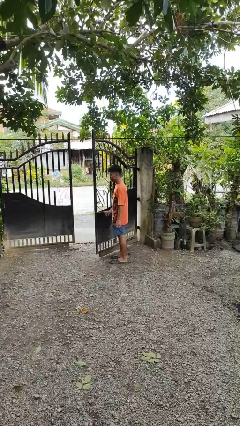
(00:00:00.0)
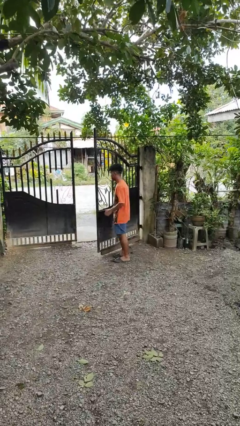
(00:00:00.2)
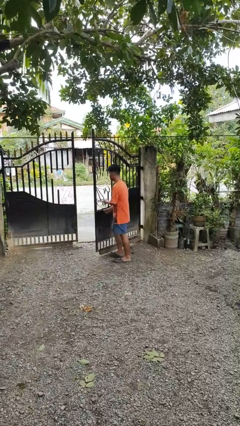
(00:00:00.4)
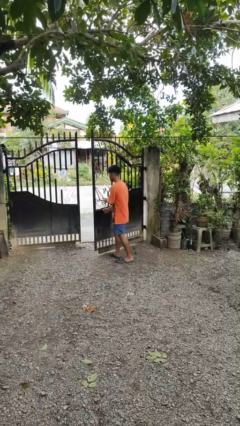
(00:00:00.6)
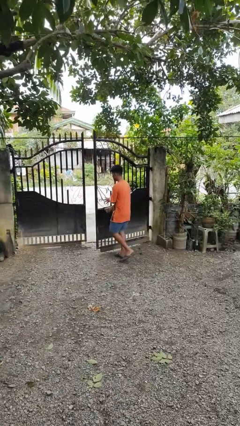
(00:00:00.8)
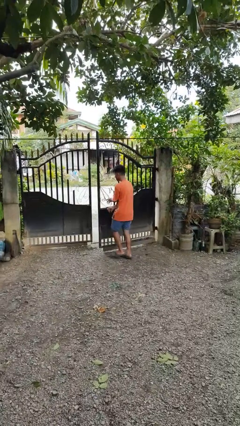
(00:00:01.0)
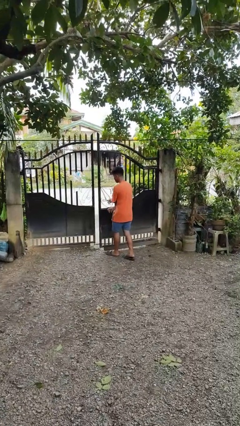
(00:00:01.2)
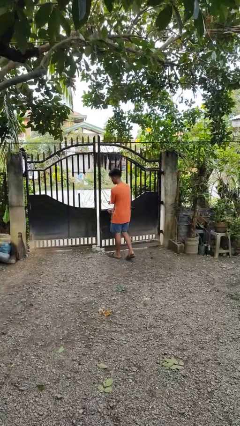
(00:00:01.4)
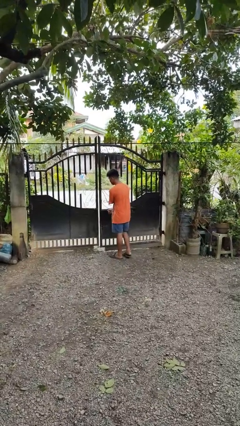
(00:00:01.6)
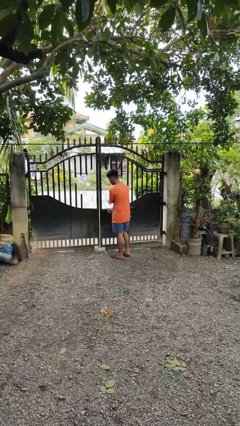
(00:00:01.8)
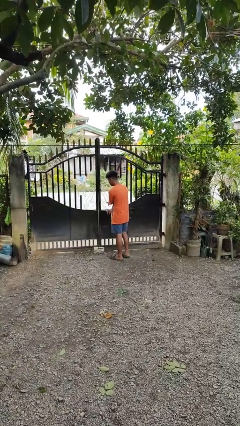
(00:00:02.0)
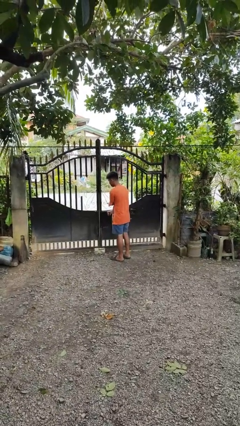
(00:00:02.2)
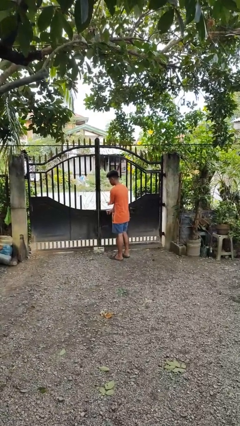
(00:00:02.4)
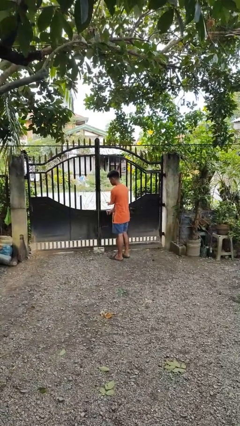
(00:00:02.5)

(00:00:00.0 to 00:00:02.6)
person closes gate

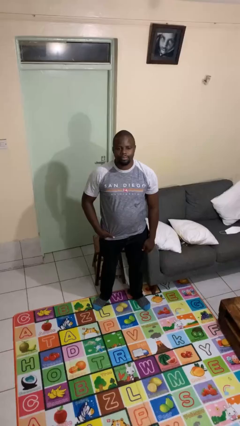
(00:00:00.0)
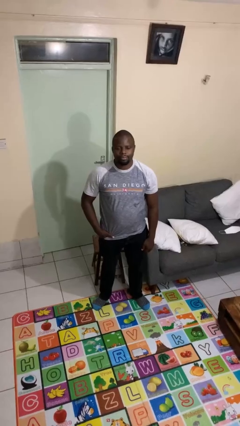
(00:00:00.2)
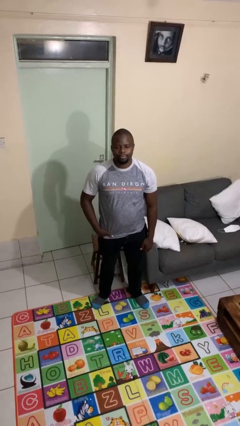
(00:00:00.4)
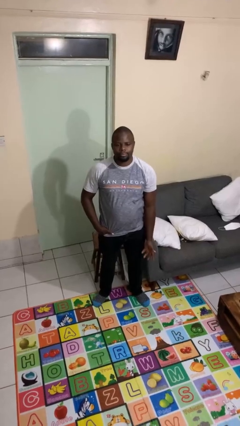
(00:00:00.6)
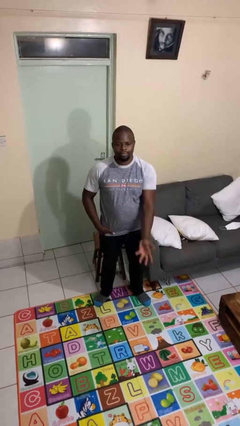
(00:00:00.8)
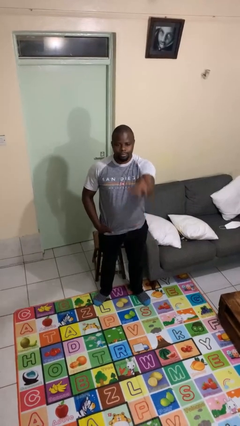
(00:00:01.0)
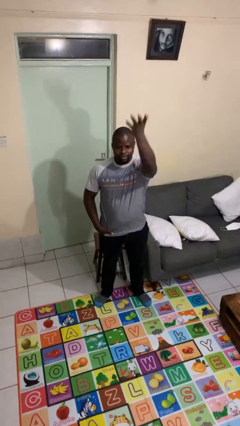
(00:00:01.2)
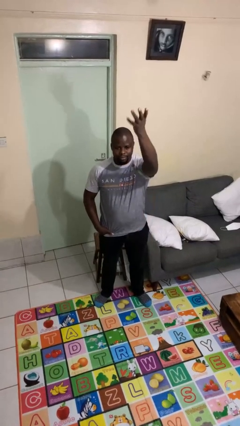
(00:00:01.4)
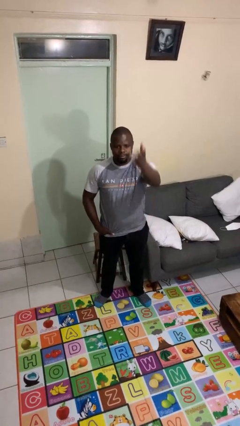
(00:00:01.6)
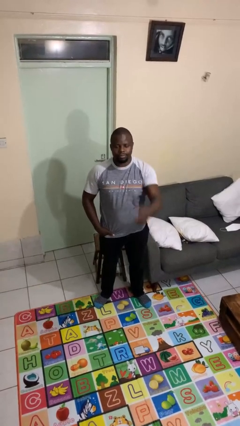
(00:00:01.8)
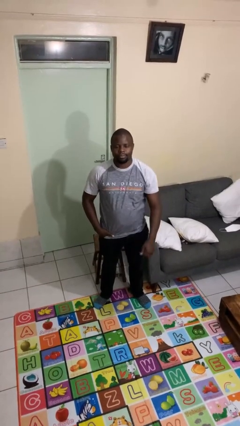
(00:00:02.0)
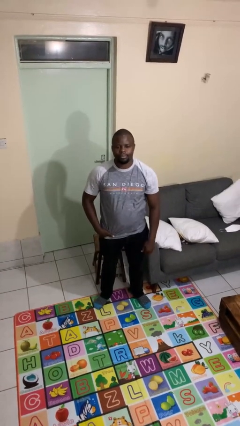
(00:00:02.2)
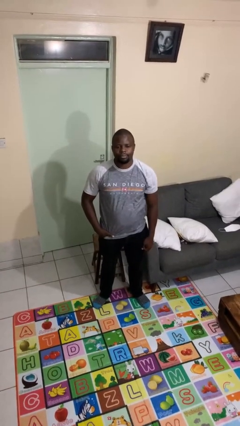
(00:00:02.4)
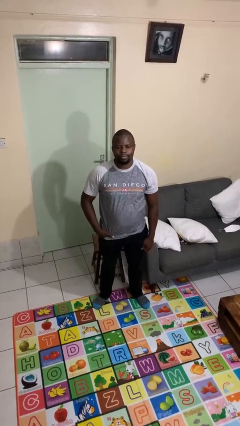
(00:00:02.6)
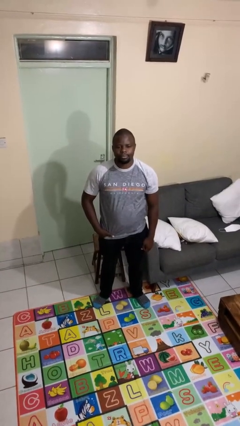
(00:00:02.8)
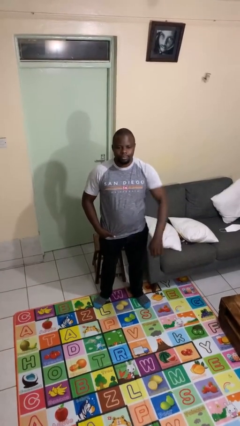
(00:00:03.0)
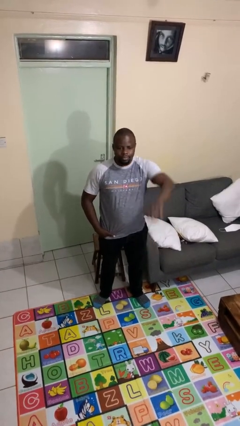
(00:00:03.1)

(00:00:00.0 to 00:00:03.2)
person gestures swipe up

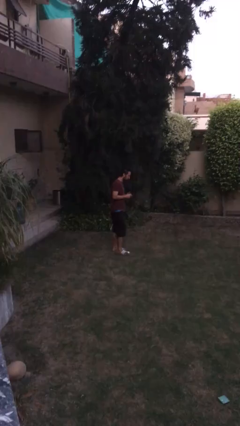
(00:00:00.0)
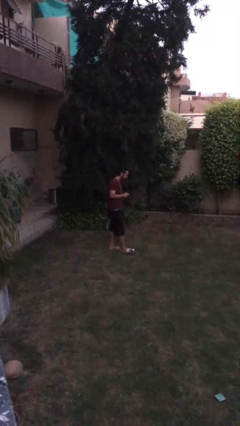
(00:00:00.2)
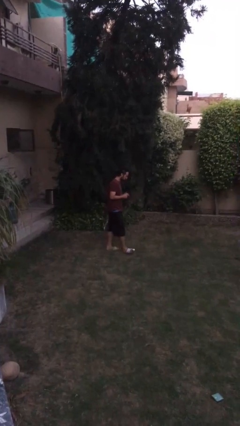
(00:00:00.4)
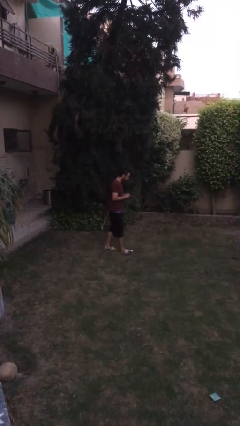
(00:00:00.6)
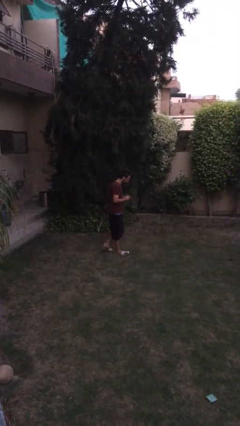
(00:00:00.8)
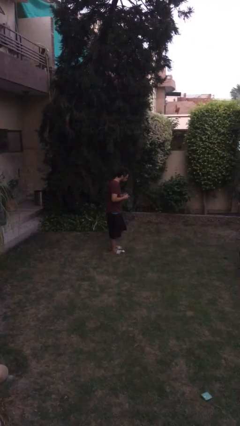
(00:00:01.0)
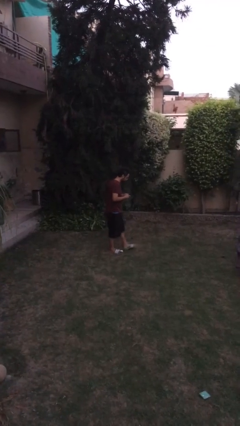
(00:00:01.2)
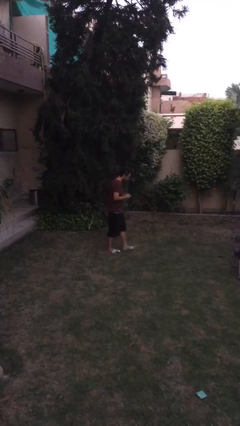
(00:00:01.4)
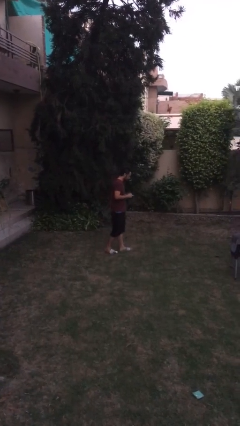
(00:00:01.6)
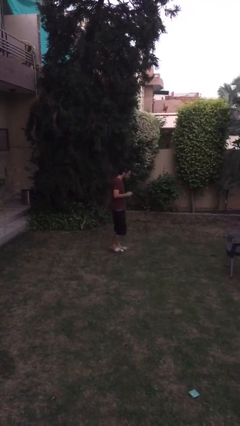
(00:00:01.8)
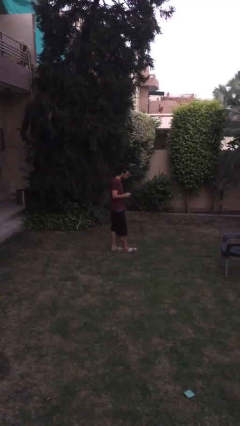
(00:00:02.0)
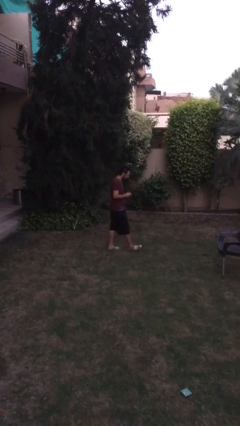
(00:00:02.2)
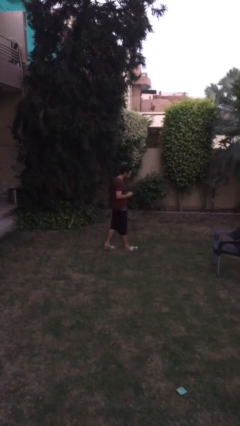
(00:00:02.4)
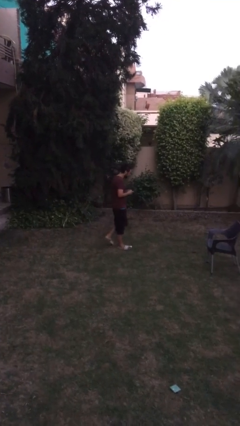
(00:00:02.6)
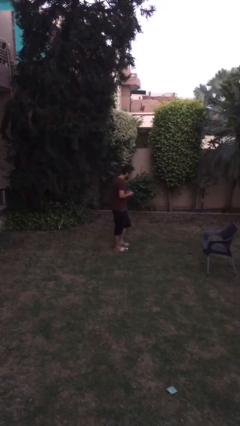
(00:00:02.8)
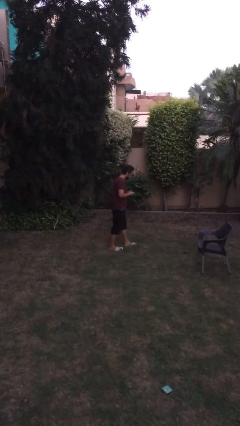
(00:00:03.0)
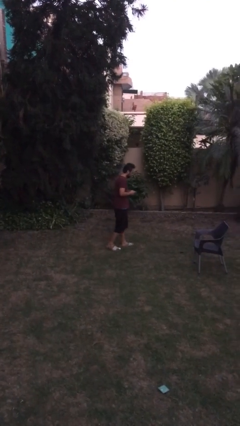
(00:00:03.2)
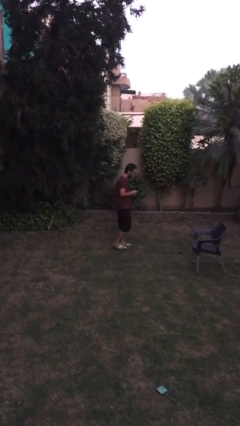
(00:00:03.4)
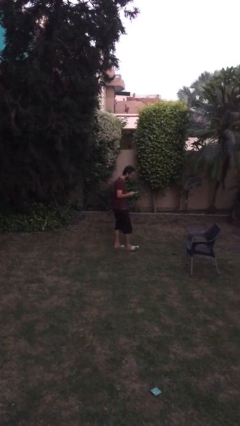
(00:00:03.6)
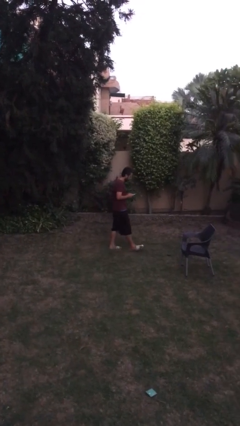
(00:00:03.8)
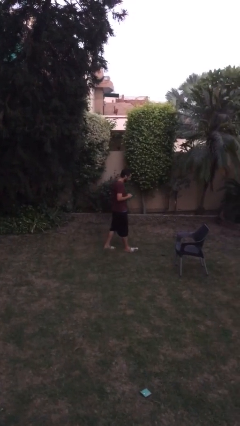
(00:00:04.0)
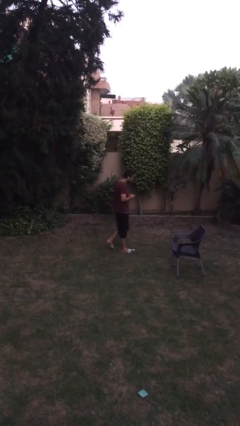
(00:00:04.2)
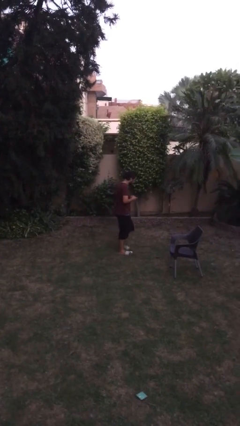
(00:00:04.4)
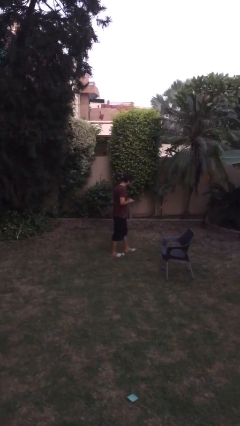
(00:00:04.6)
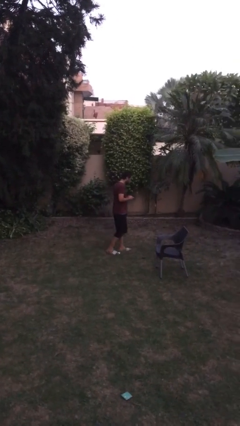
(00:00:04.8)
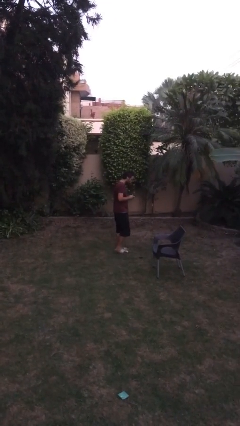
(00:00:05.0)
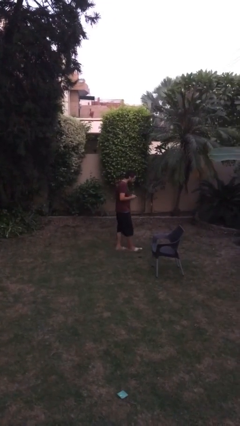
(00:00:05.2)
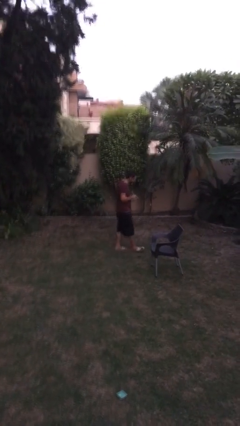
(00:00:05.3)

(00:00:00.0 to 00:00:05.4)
person texts on phone

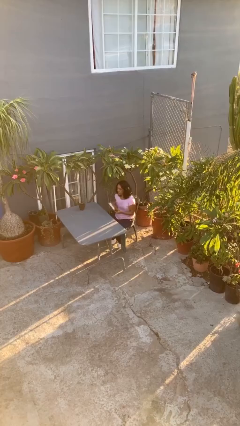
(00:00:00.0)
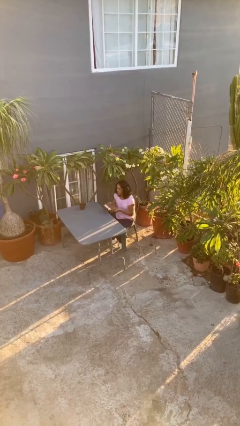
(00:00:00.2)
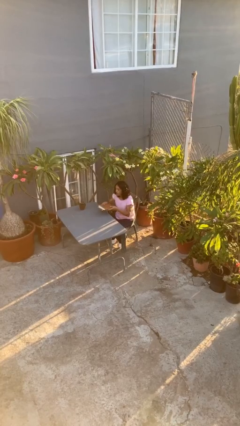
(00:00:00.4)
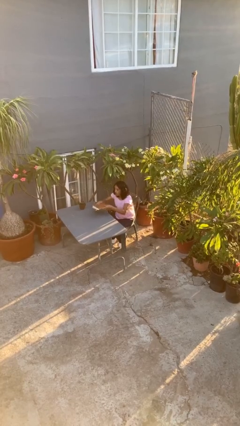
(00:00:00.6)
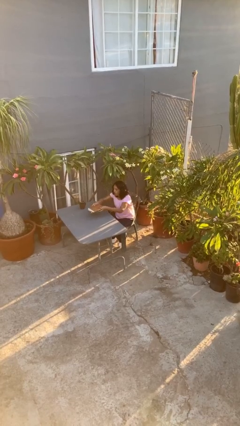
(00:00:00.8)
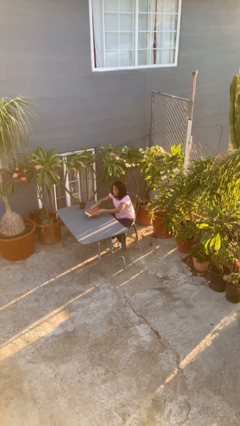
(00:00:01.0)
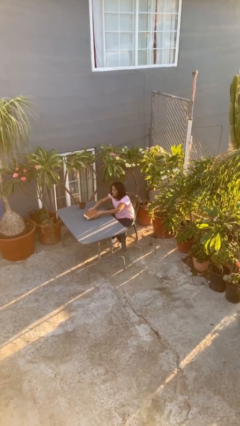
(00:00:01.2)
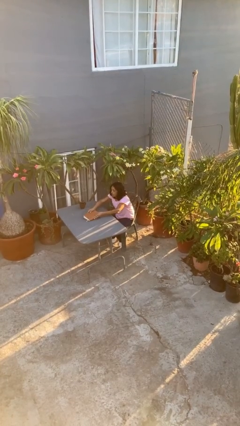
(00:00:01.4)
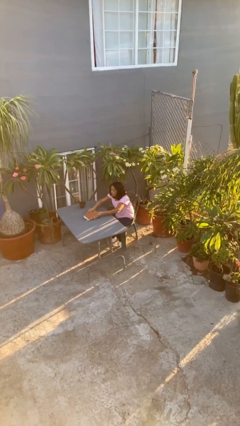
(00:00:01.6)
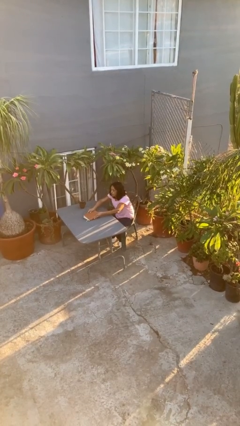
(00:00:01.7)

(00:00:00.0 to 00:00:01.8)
person puts down object on table

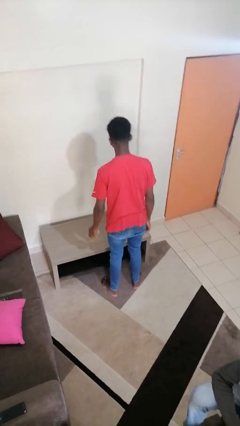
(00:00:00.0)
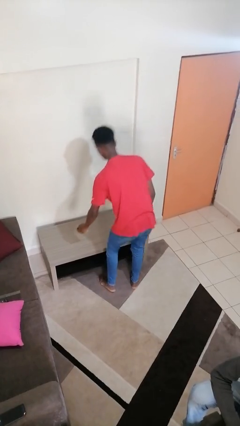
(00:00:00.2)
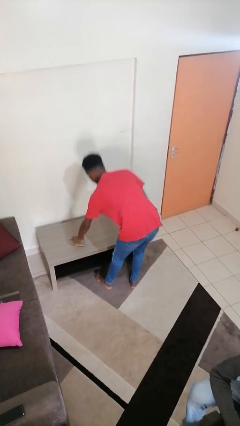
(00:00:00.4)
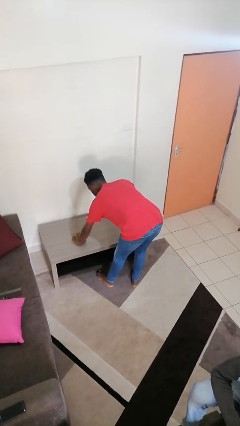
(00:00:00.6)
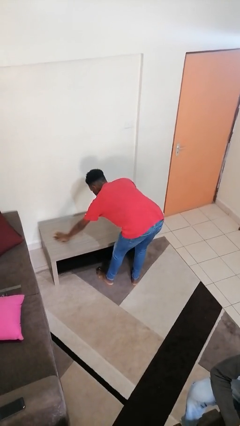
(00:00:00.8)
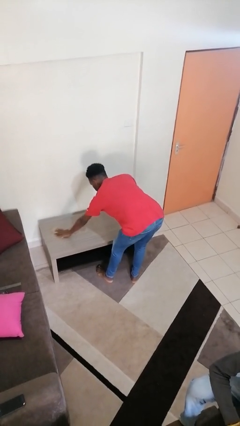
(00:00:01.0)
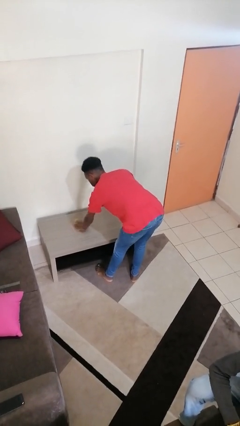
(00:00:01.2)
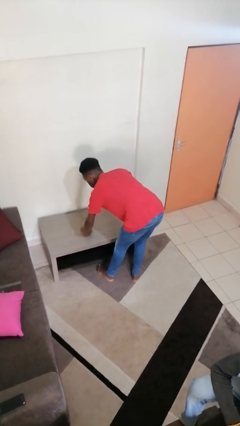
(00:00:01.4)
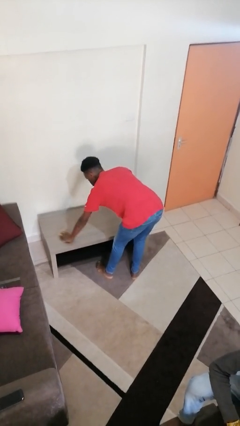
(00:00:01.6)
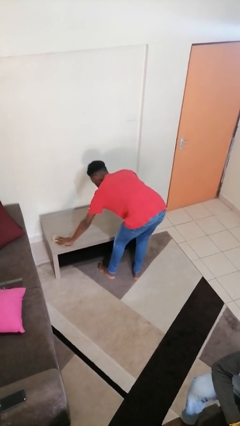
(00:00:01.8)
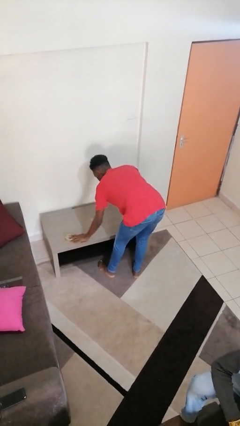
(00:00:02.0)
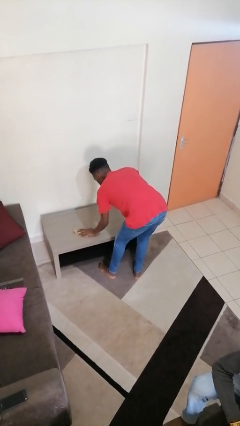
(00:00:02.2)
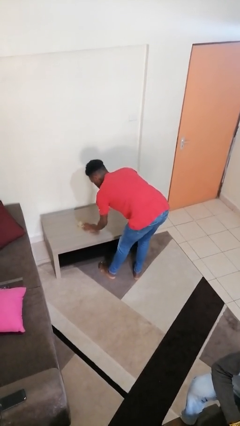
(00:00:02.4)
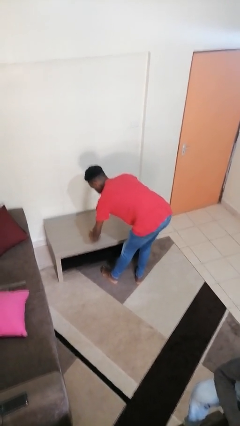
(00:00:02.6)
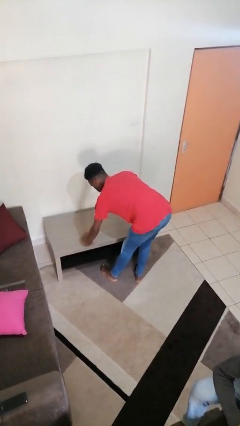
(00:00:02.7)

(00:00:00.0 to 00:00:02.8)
person cleans table with rag

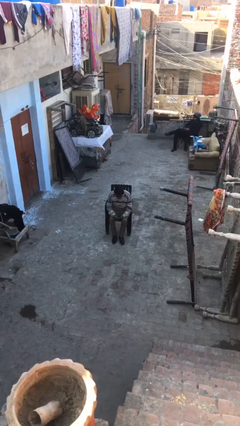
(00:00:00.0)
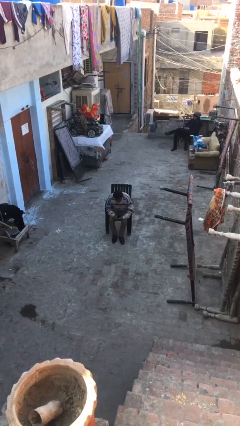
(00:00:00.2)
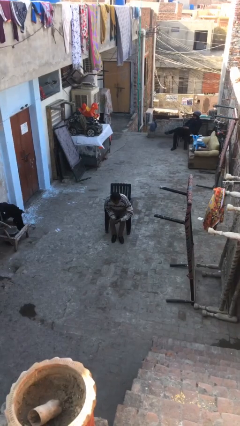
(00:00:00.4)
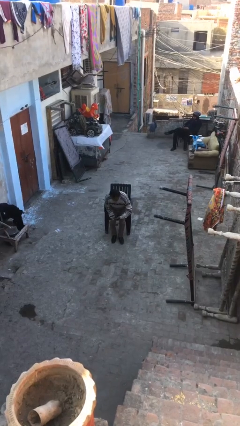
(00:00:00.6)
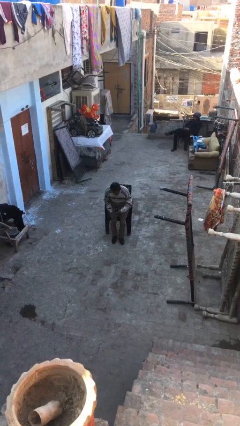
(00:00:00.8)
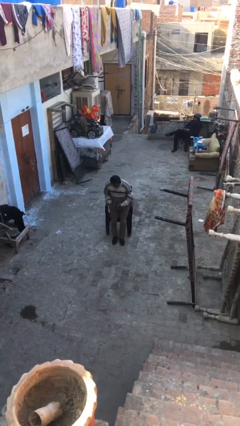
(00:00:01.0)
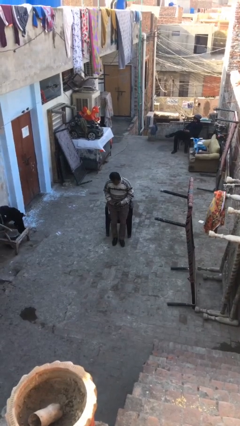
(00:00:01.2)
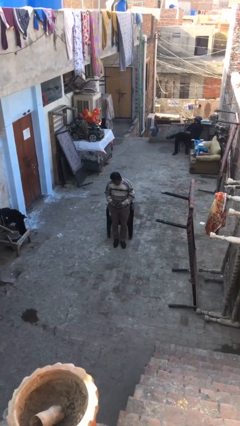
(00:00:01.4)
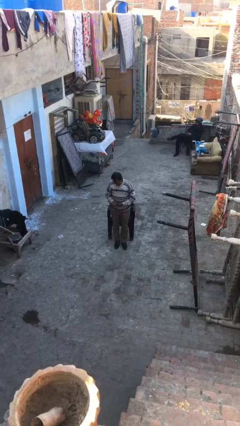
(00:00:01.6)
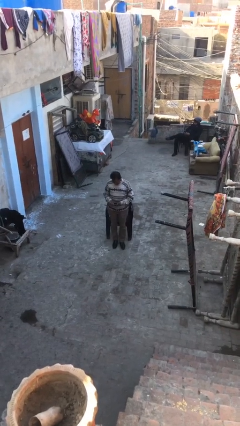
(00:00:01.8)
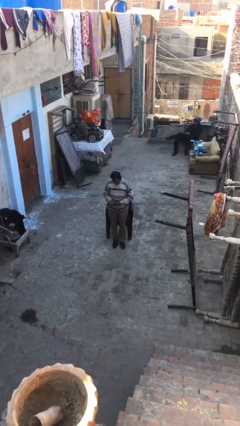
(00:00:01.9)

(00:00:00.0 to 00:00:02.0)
person stands up
